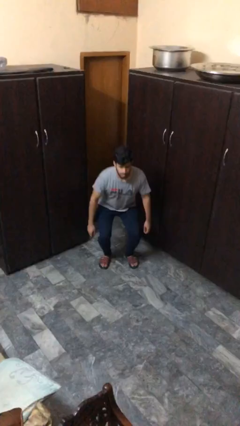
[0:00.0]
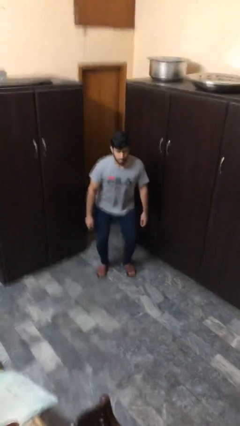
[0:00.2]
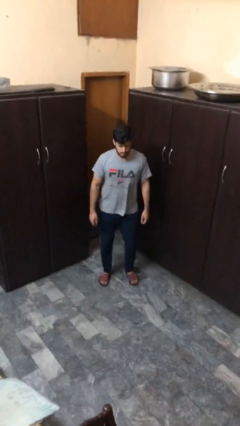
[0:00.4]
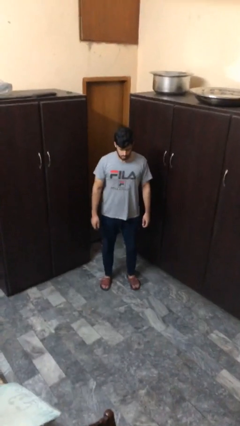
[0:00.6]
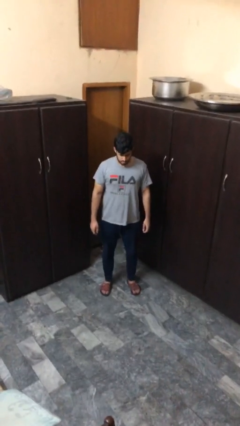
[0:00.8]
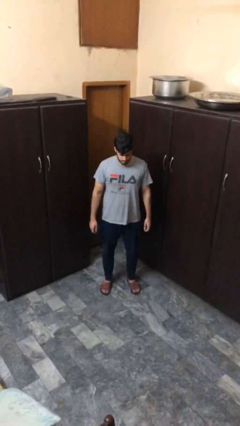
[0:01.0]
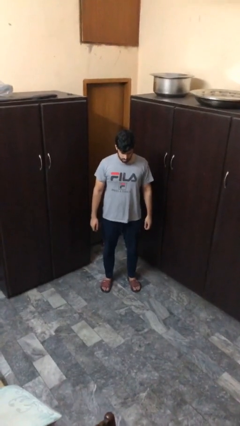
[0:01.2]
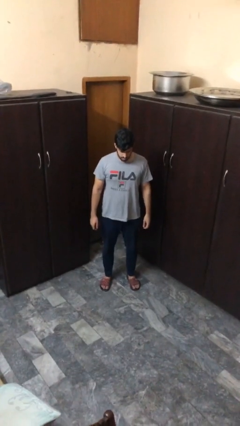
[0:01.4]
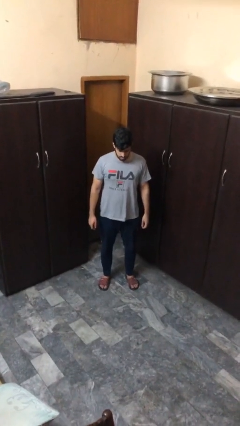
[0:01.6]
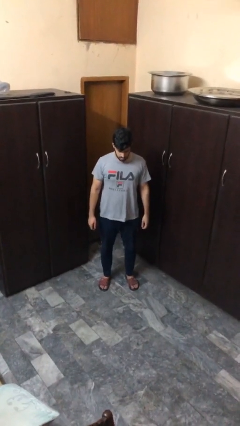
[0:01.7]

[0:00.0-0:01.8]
person stands up

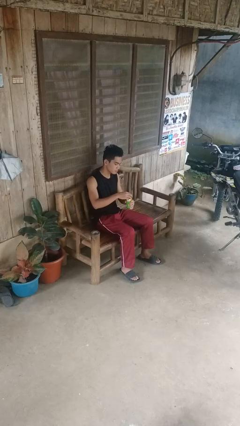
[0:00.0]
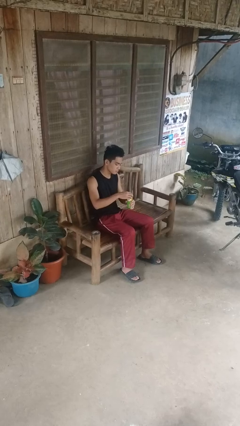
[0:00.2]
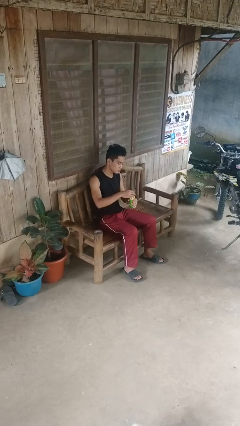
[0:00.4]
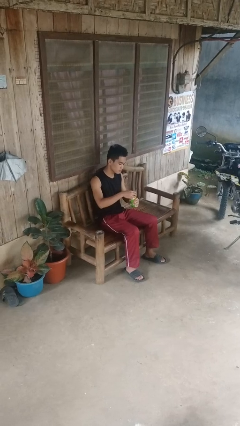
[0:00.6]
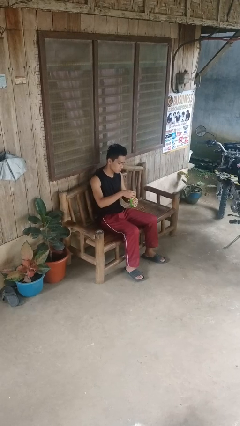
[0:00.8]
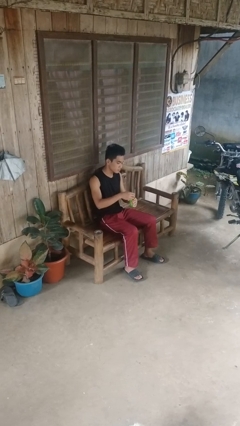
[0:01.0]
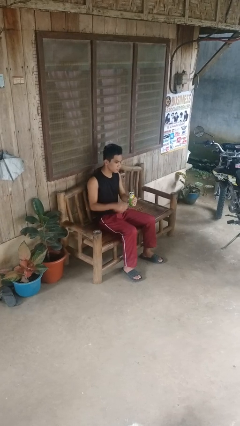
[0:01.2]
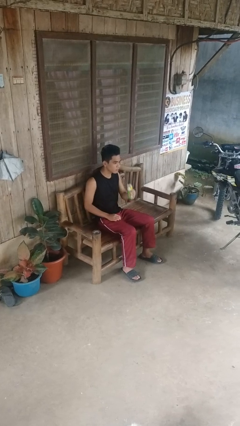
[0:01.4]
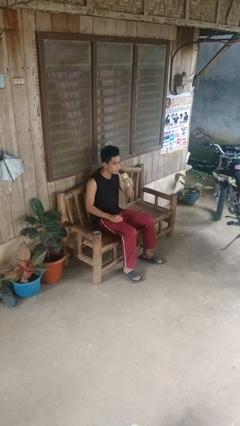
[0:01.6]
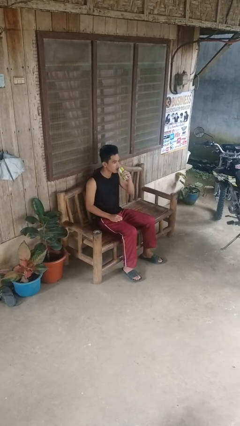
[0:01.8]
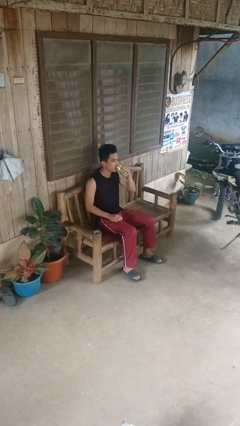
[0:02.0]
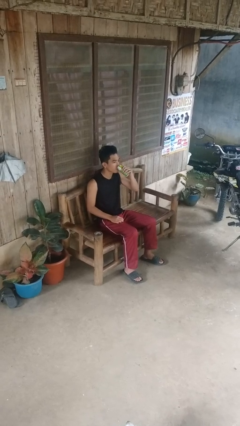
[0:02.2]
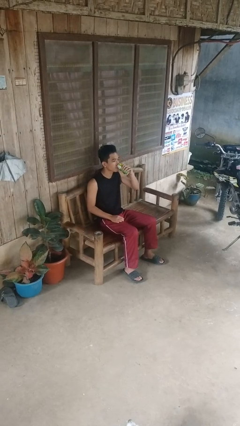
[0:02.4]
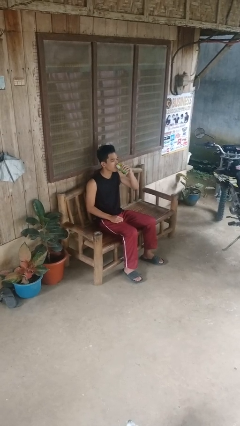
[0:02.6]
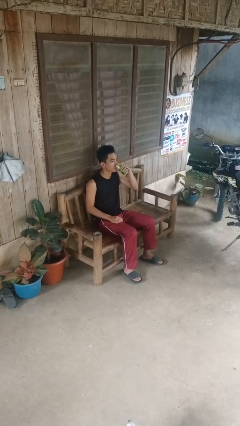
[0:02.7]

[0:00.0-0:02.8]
person opens beverage can

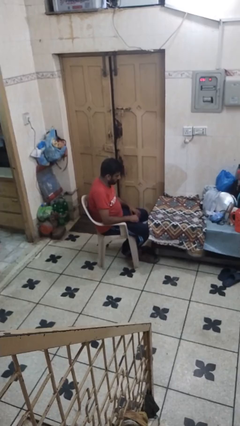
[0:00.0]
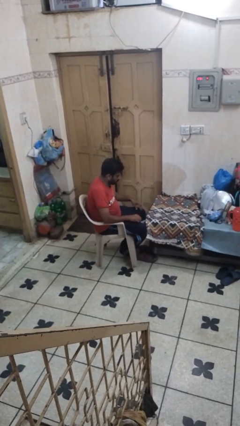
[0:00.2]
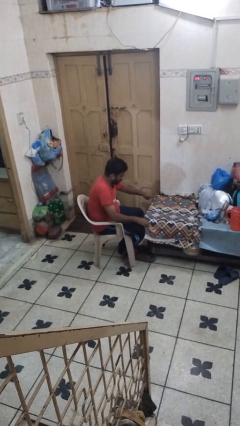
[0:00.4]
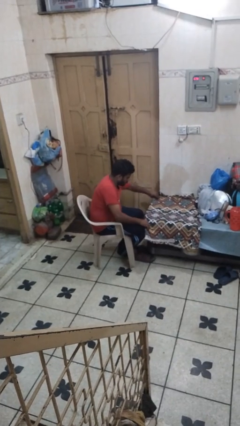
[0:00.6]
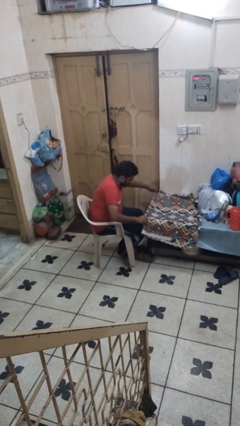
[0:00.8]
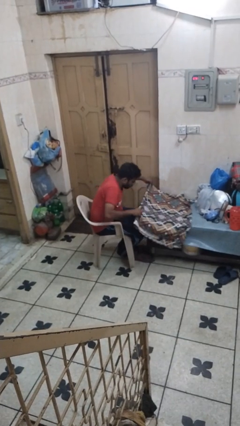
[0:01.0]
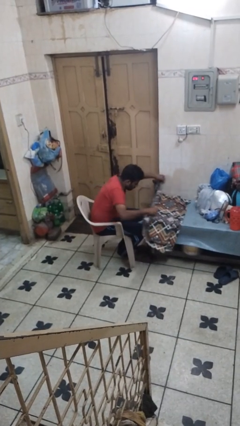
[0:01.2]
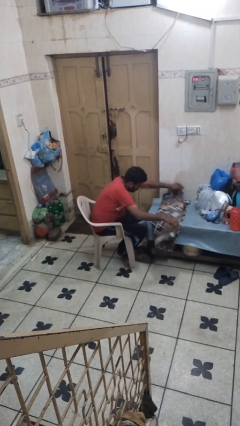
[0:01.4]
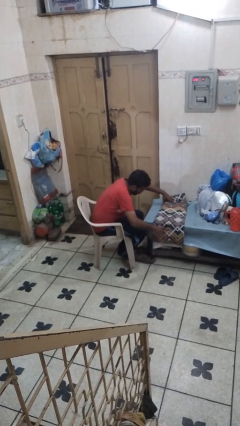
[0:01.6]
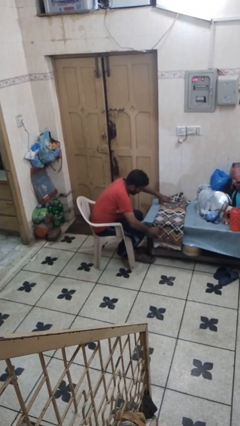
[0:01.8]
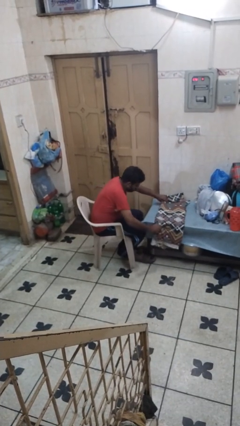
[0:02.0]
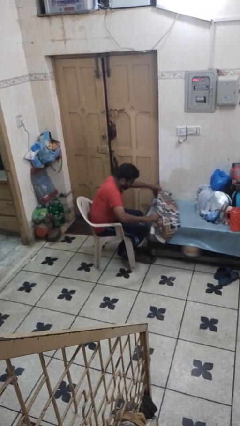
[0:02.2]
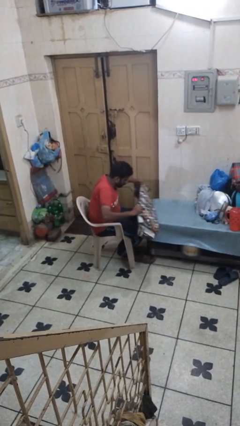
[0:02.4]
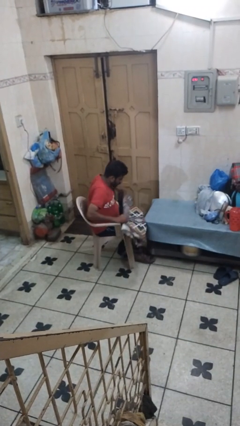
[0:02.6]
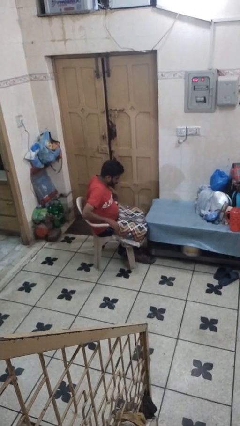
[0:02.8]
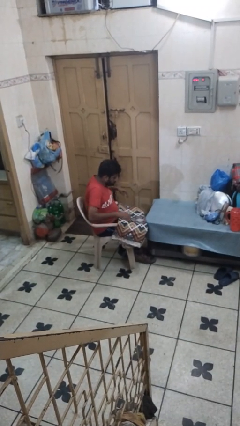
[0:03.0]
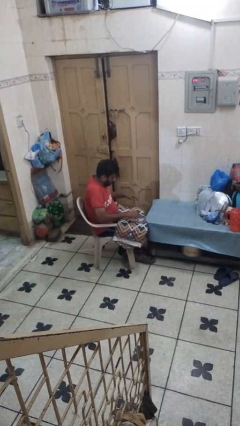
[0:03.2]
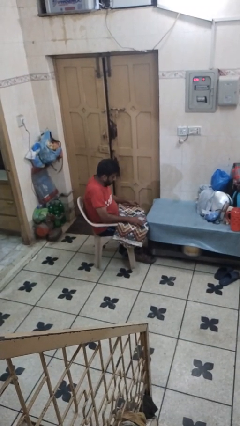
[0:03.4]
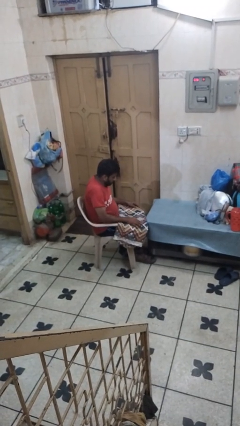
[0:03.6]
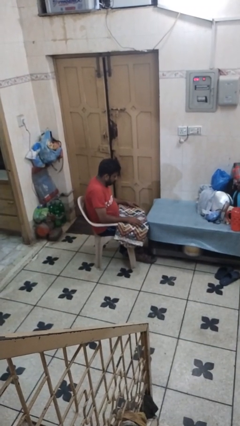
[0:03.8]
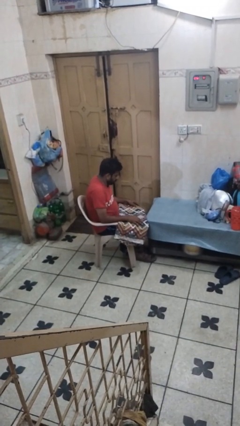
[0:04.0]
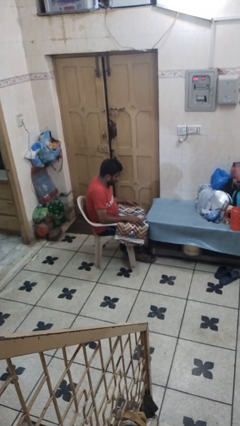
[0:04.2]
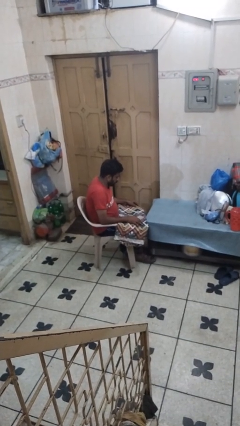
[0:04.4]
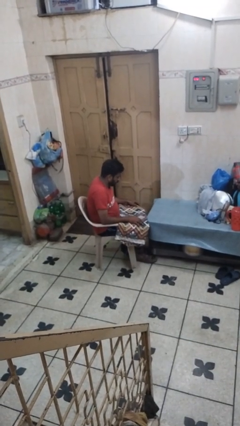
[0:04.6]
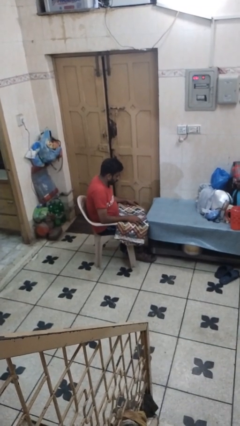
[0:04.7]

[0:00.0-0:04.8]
person folds tablecloth

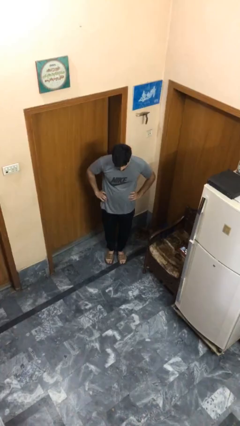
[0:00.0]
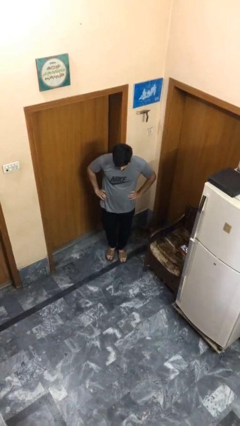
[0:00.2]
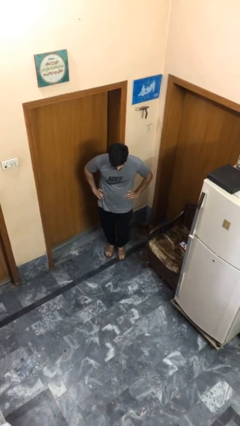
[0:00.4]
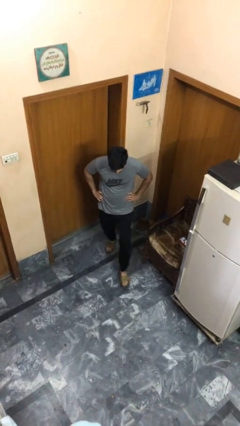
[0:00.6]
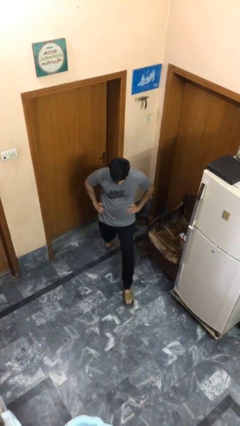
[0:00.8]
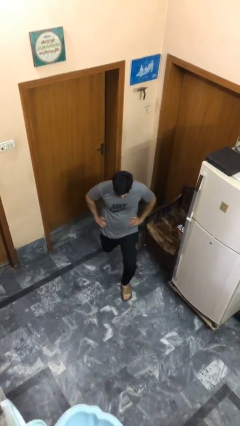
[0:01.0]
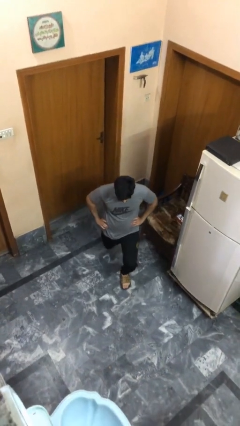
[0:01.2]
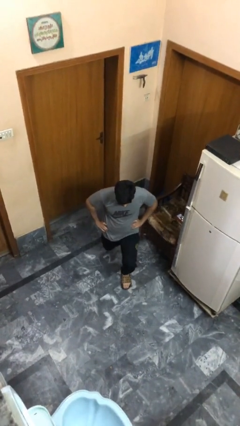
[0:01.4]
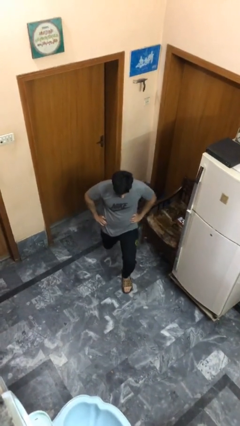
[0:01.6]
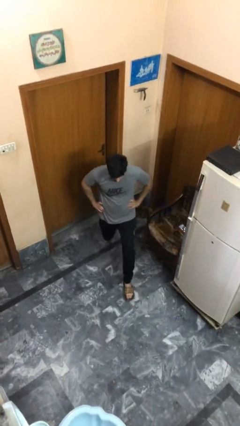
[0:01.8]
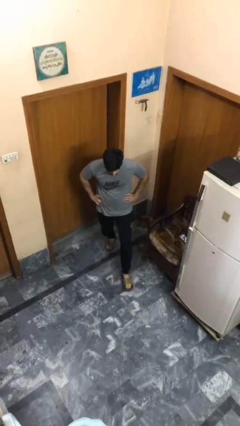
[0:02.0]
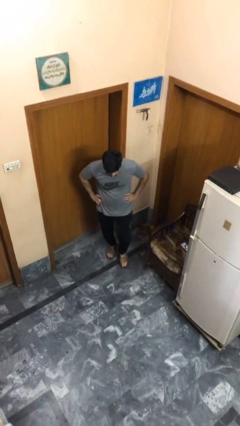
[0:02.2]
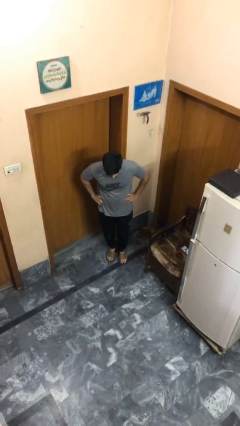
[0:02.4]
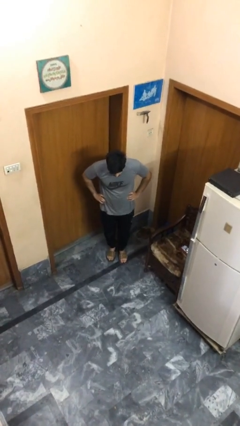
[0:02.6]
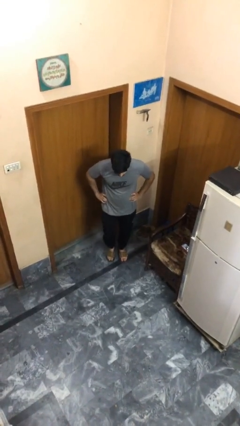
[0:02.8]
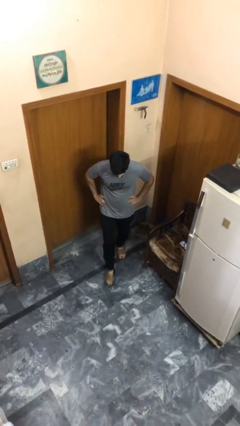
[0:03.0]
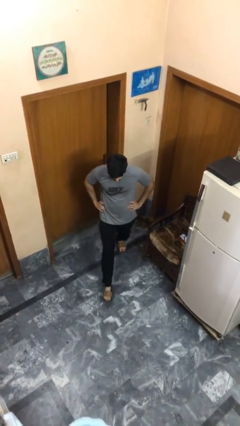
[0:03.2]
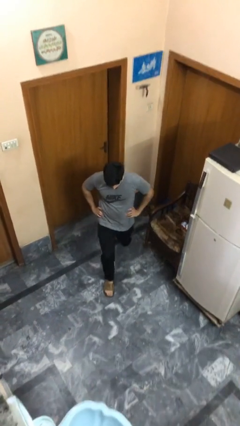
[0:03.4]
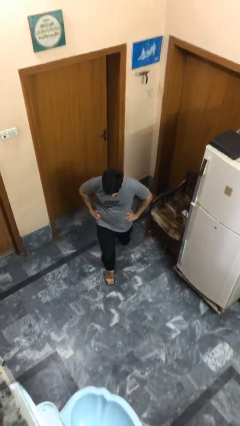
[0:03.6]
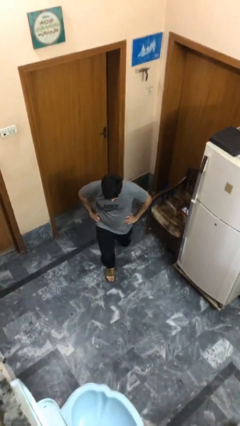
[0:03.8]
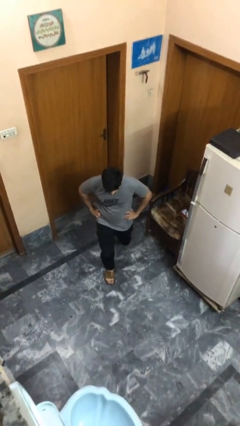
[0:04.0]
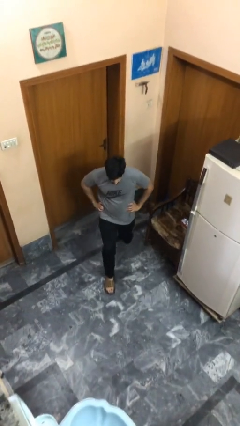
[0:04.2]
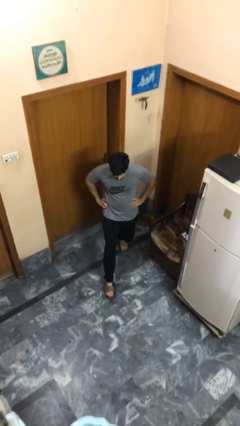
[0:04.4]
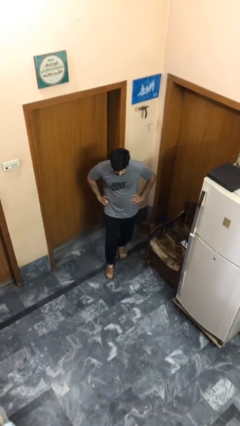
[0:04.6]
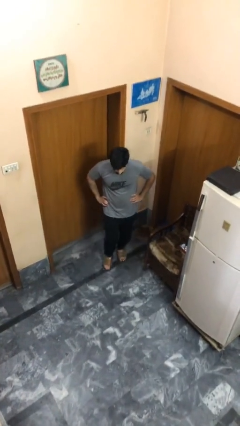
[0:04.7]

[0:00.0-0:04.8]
person exercises with lunges

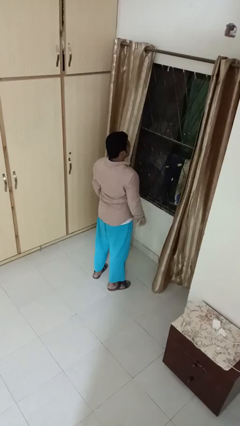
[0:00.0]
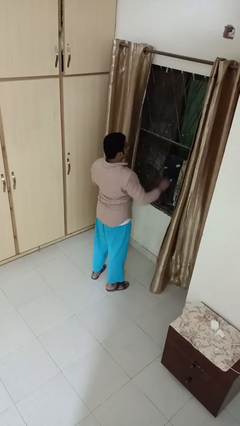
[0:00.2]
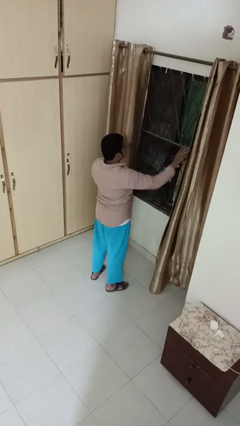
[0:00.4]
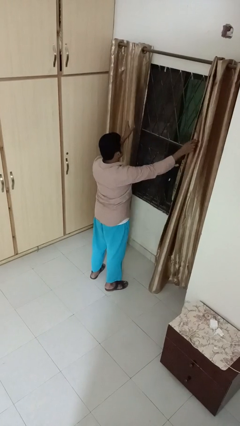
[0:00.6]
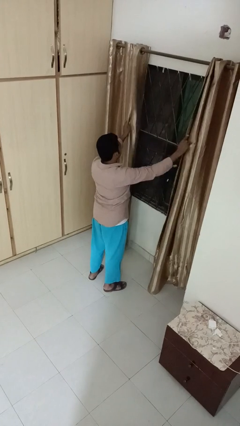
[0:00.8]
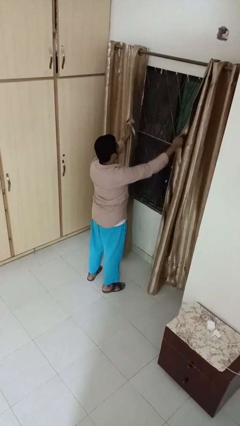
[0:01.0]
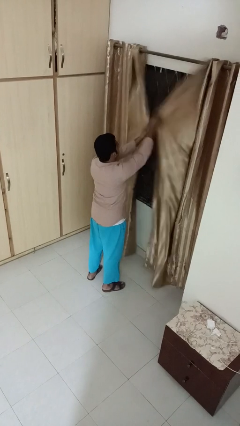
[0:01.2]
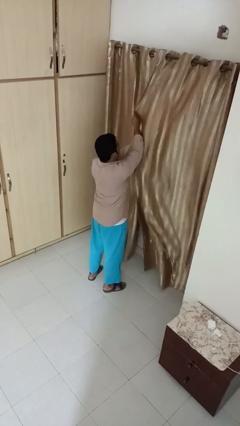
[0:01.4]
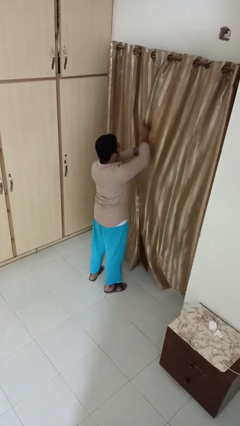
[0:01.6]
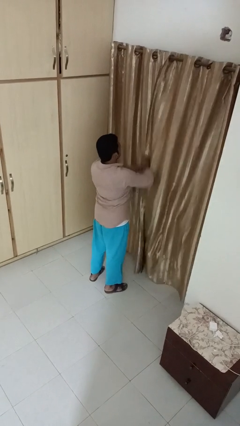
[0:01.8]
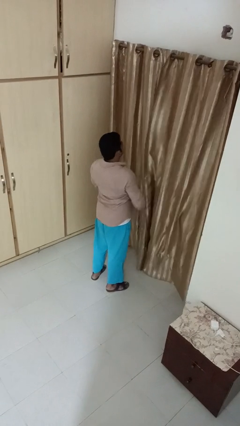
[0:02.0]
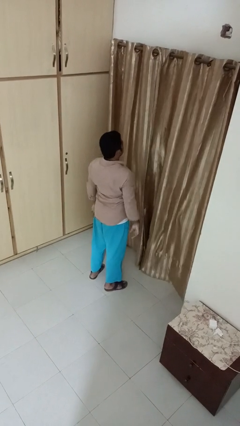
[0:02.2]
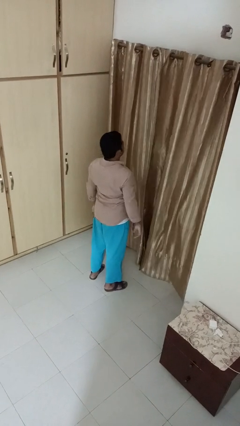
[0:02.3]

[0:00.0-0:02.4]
person closes curtains

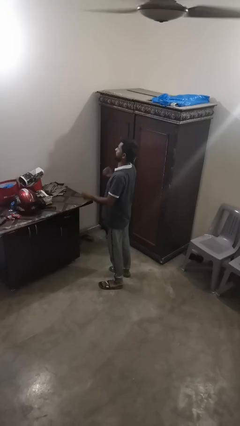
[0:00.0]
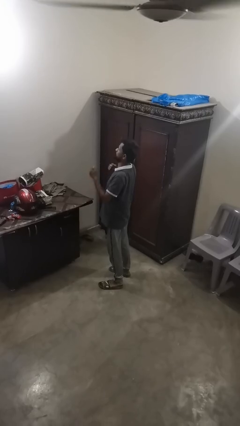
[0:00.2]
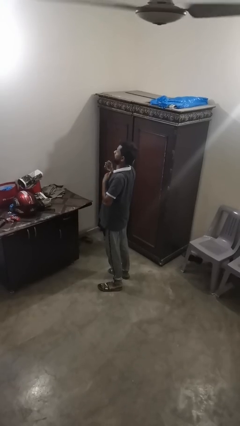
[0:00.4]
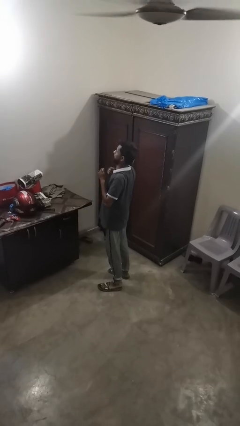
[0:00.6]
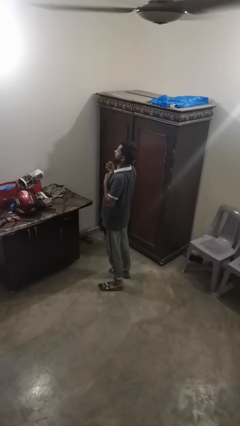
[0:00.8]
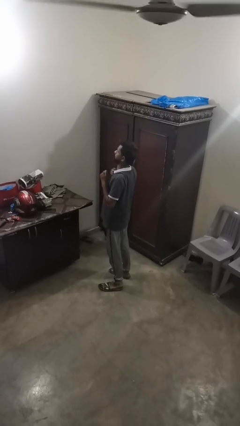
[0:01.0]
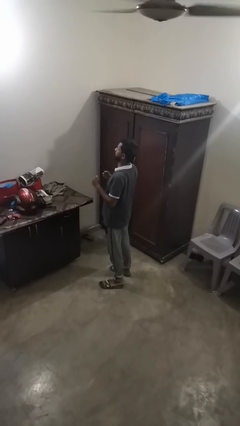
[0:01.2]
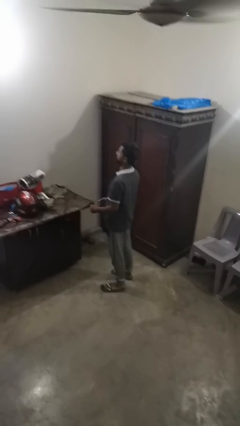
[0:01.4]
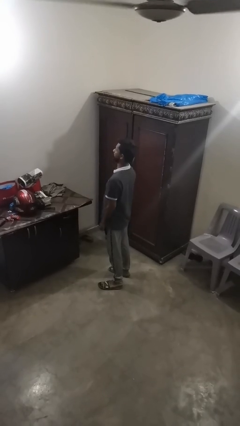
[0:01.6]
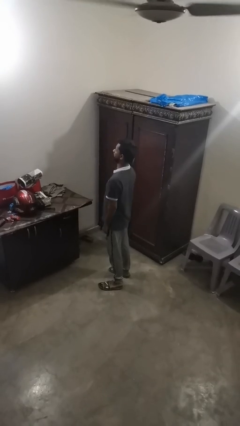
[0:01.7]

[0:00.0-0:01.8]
person drums on chest
